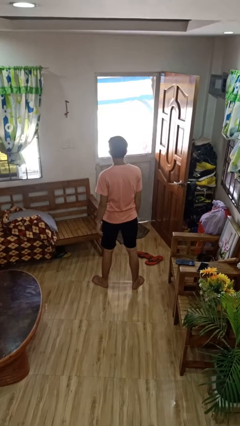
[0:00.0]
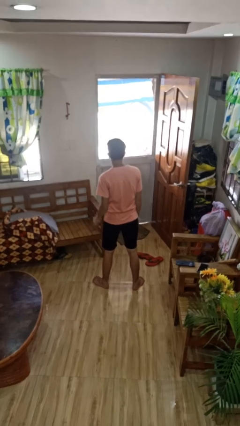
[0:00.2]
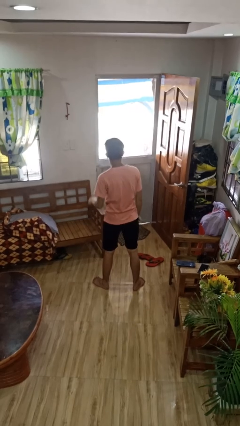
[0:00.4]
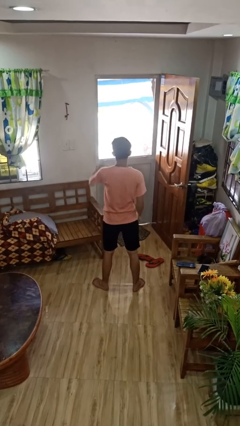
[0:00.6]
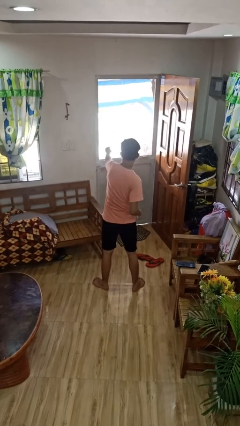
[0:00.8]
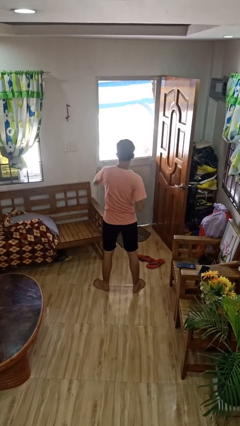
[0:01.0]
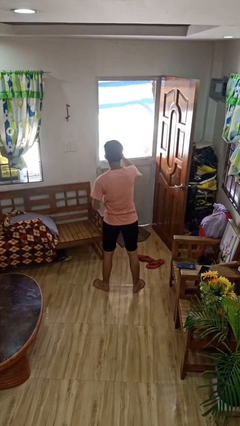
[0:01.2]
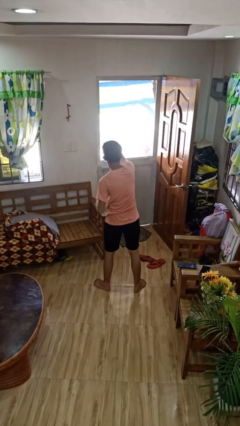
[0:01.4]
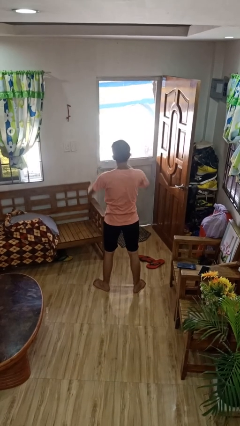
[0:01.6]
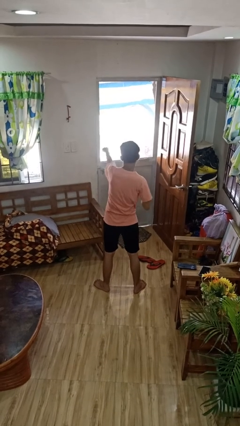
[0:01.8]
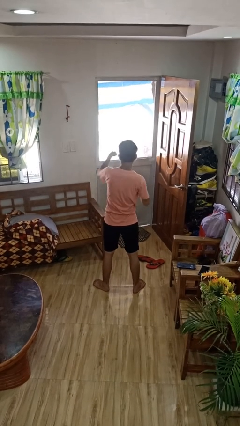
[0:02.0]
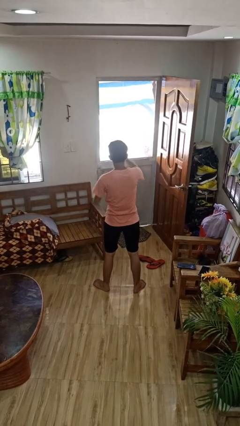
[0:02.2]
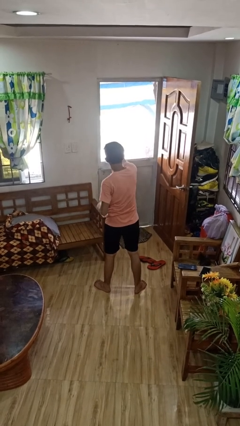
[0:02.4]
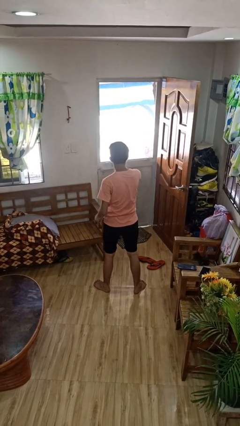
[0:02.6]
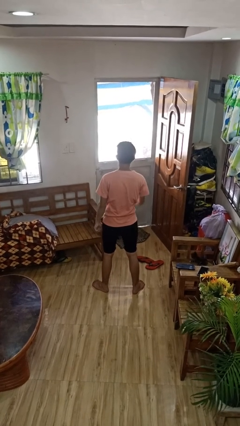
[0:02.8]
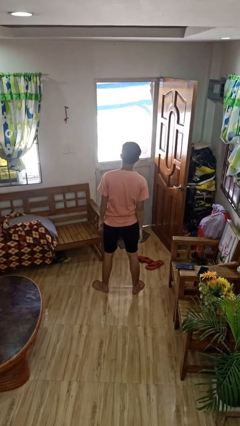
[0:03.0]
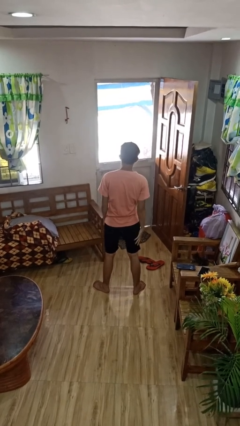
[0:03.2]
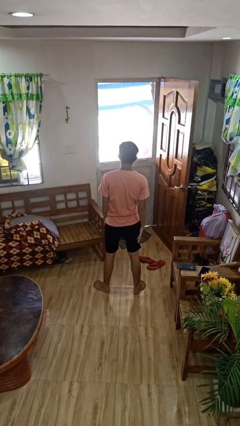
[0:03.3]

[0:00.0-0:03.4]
person punches

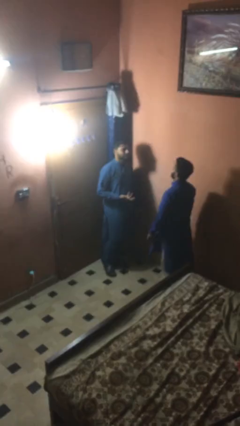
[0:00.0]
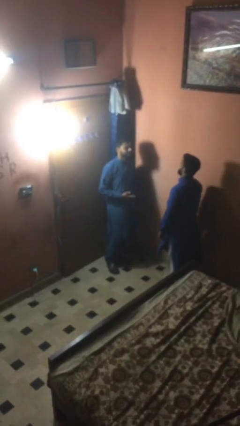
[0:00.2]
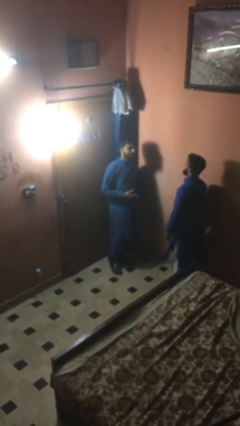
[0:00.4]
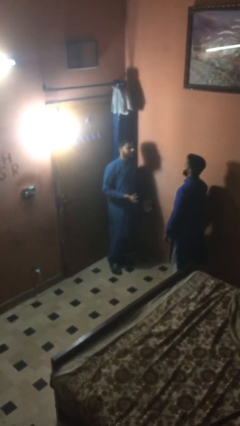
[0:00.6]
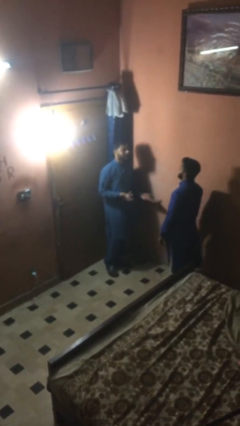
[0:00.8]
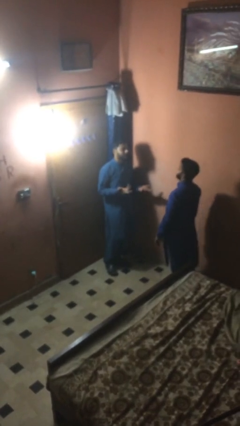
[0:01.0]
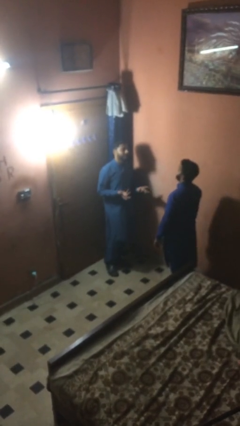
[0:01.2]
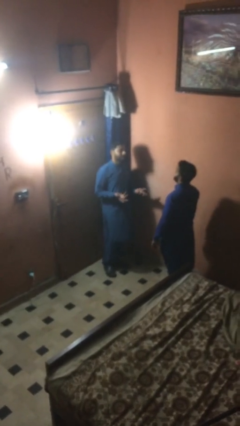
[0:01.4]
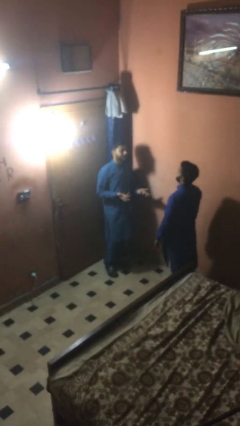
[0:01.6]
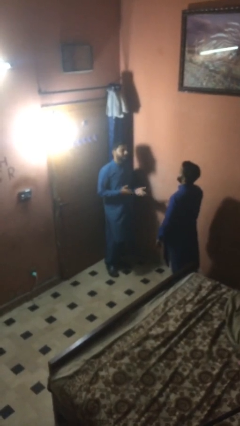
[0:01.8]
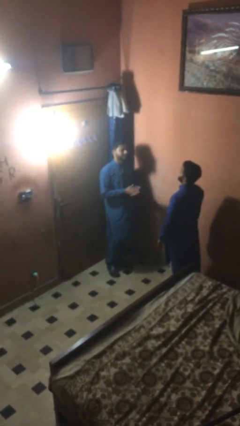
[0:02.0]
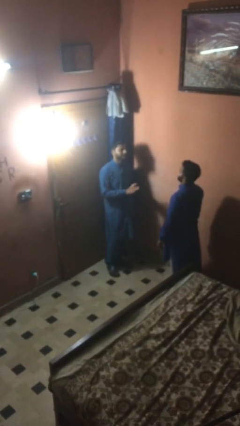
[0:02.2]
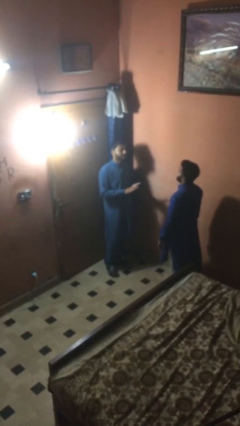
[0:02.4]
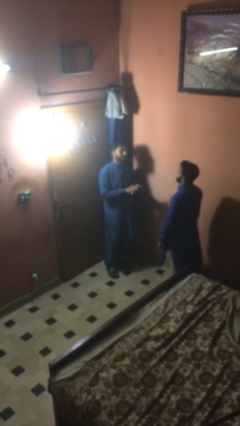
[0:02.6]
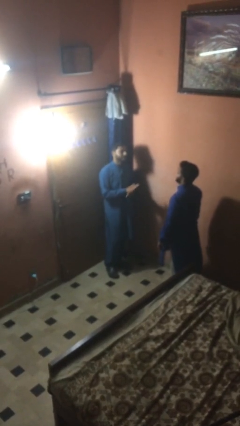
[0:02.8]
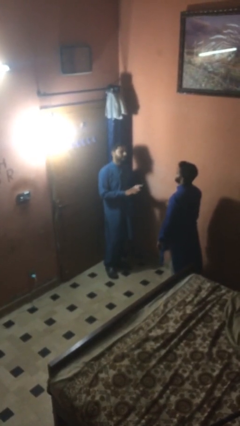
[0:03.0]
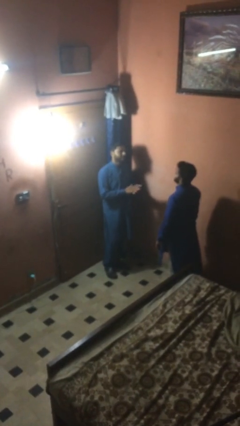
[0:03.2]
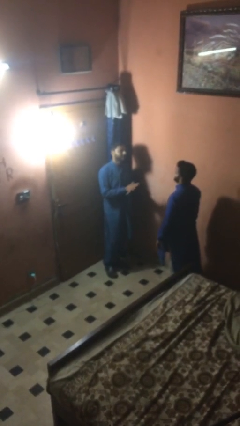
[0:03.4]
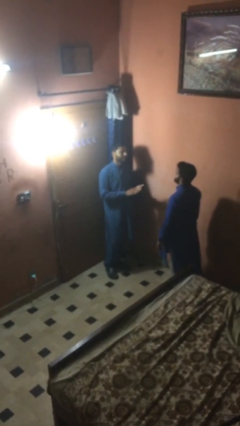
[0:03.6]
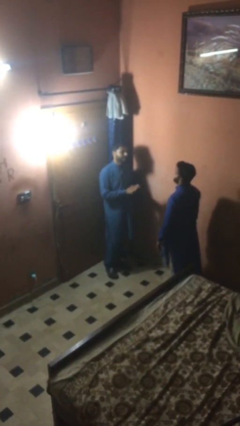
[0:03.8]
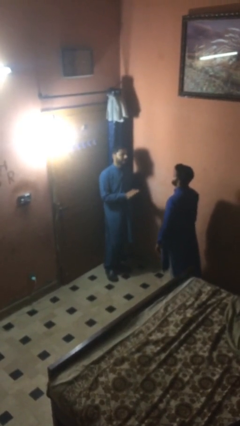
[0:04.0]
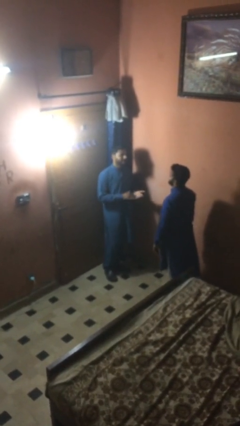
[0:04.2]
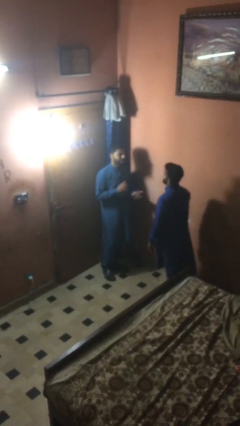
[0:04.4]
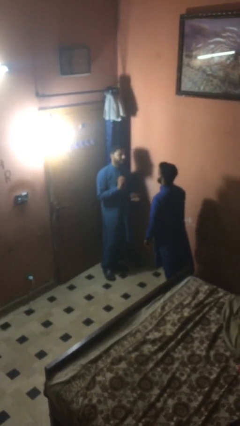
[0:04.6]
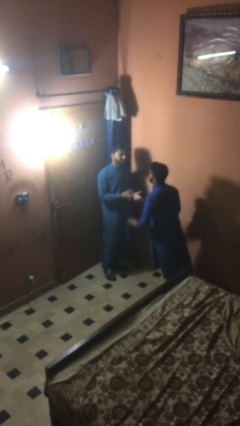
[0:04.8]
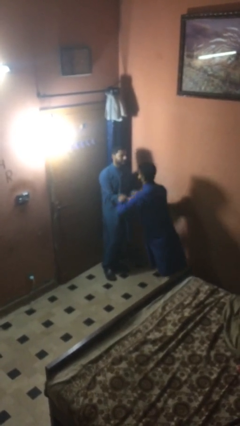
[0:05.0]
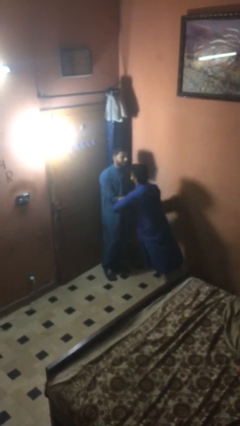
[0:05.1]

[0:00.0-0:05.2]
person talks to person

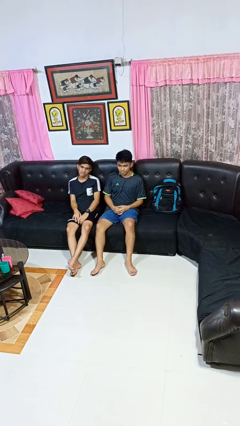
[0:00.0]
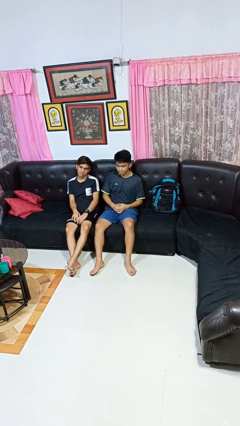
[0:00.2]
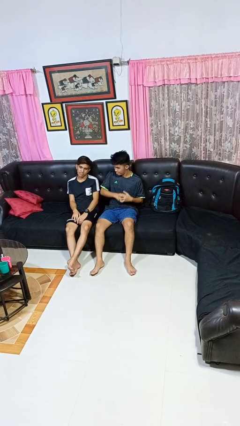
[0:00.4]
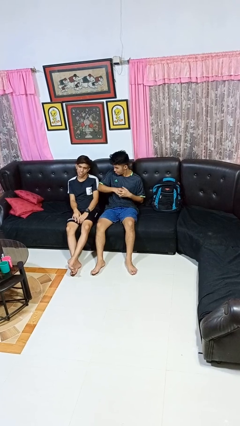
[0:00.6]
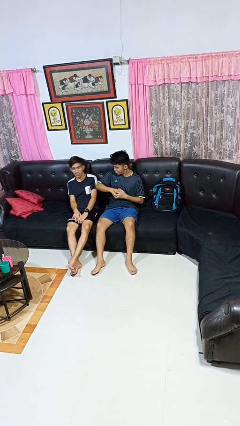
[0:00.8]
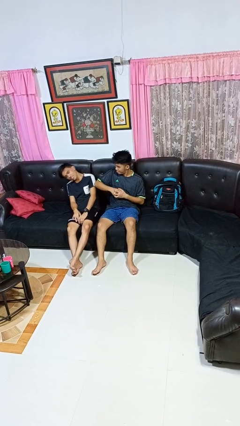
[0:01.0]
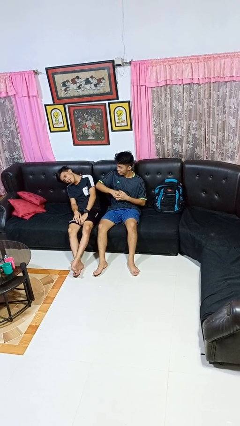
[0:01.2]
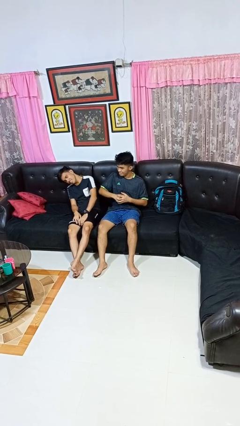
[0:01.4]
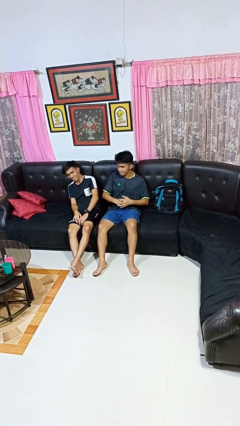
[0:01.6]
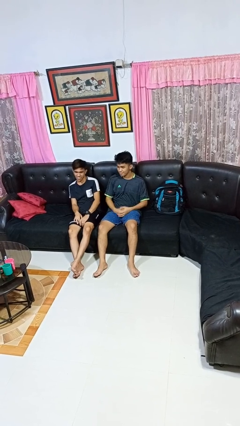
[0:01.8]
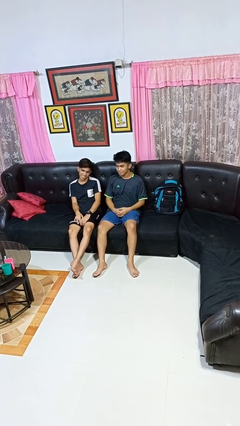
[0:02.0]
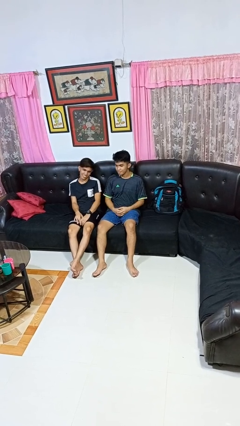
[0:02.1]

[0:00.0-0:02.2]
person nudges person with elbow

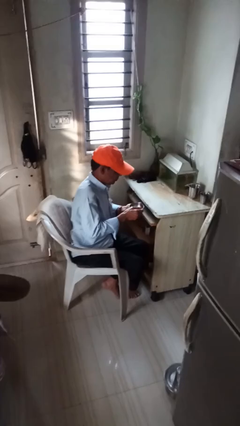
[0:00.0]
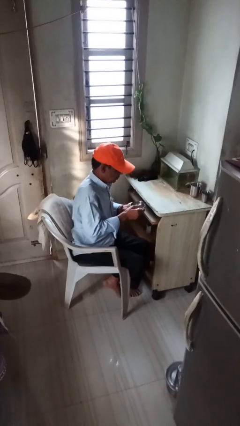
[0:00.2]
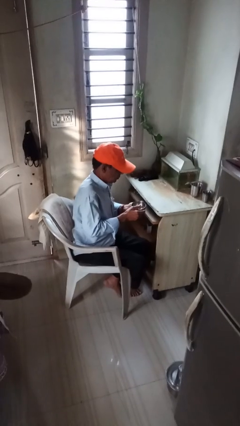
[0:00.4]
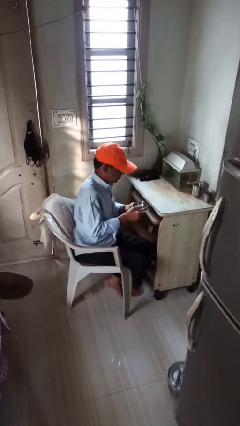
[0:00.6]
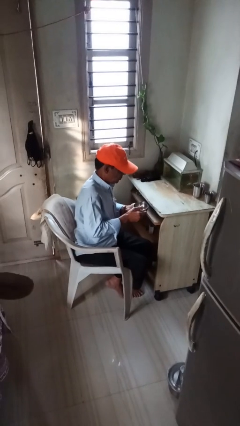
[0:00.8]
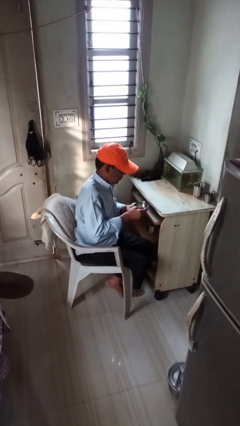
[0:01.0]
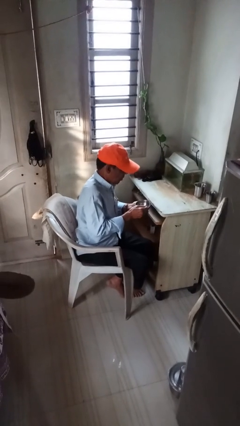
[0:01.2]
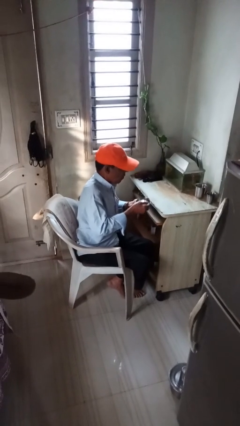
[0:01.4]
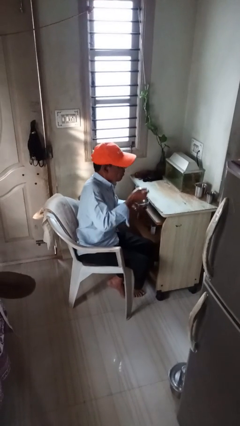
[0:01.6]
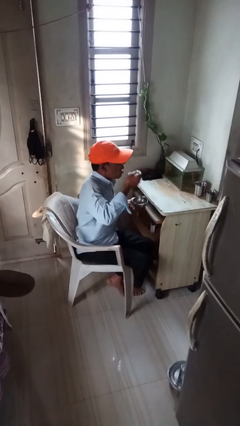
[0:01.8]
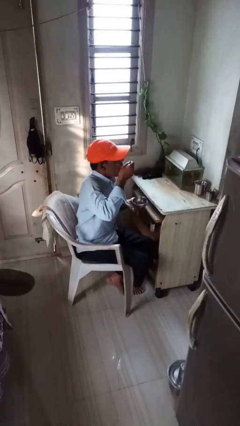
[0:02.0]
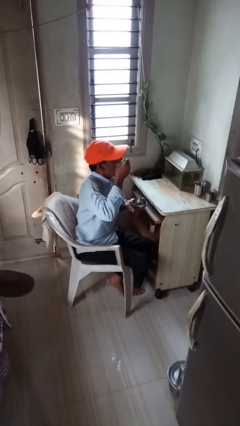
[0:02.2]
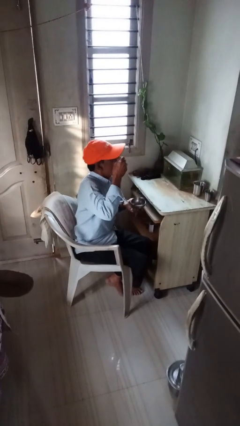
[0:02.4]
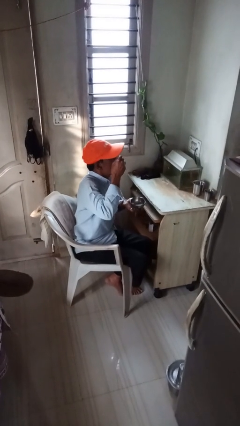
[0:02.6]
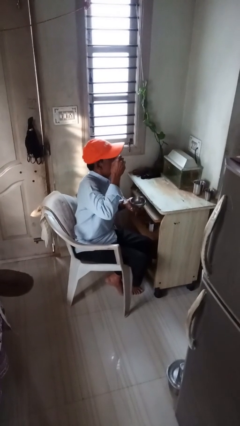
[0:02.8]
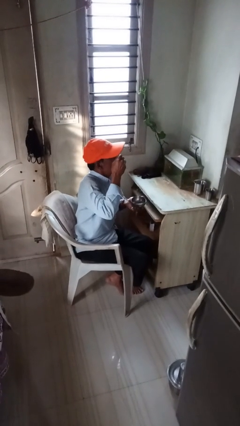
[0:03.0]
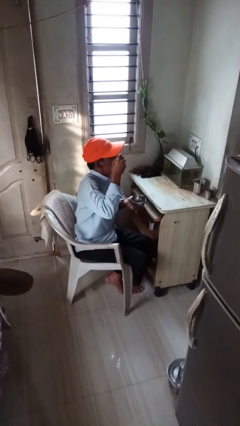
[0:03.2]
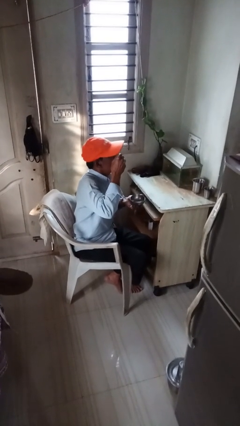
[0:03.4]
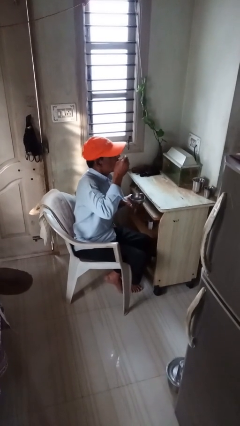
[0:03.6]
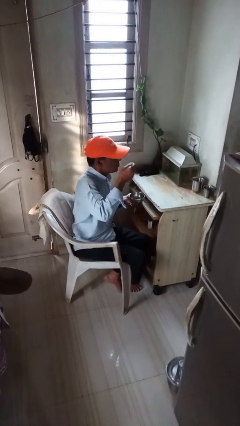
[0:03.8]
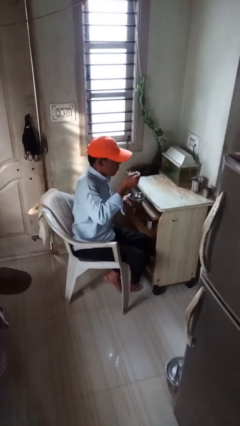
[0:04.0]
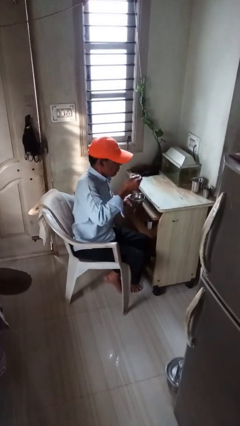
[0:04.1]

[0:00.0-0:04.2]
person eats with utensil

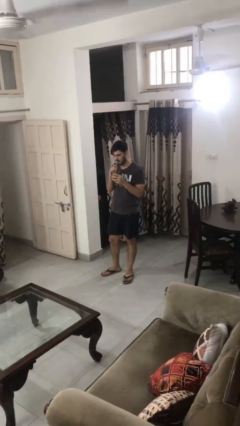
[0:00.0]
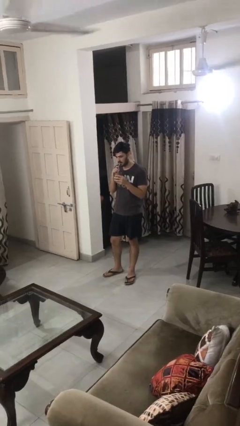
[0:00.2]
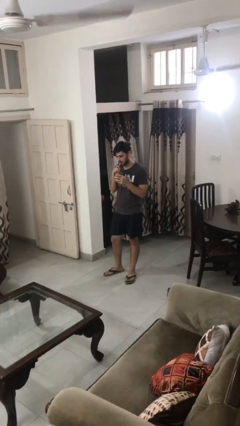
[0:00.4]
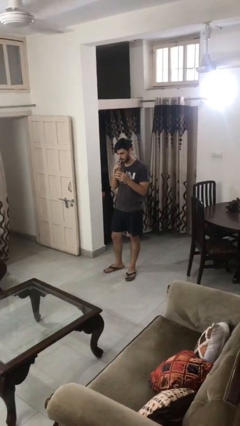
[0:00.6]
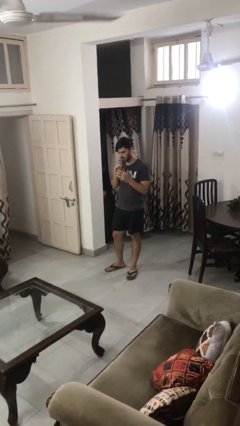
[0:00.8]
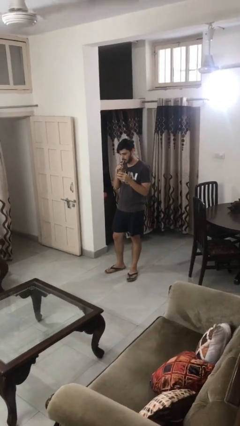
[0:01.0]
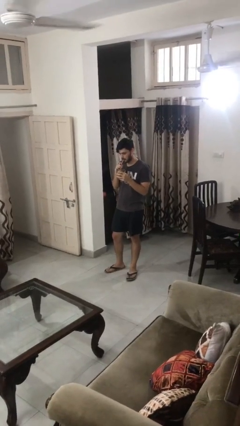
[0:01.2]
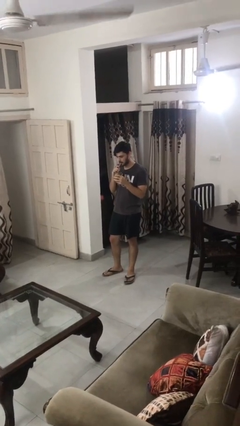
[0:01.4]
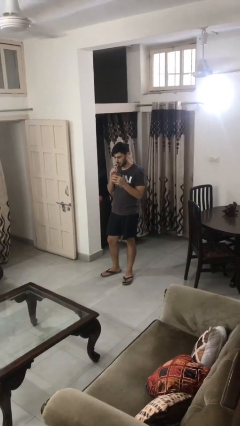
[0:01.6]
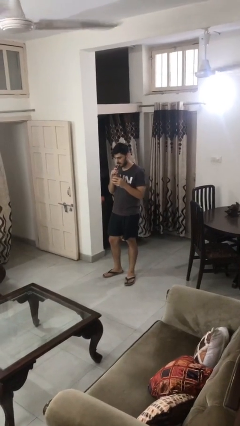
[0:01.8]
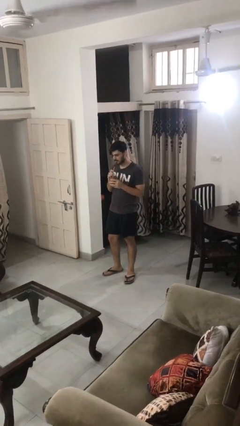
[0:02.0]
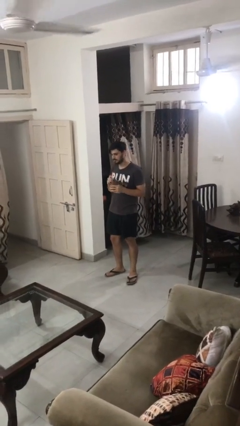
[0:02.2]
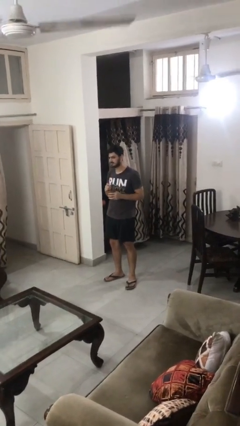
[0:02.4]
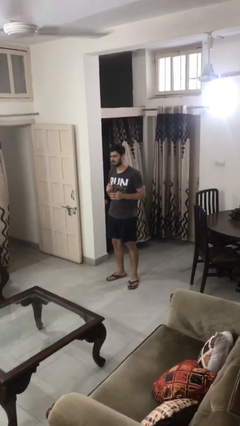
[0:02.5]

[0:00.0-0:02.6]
person drinks from straw

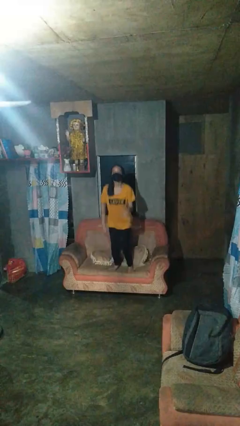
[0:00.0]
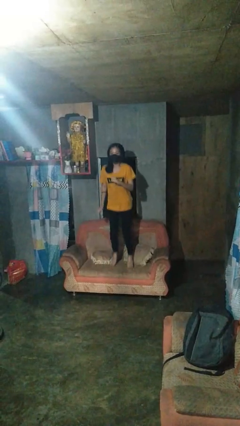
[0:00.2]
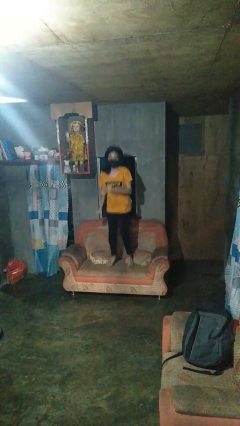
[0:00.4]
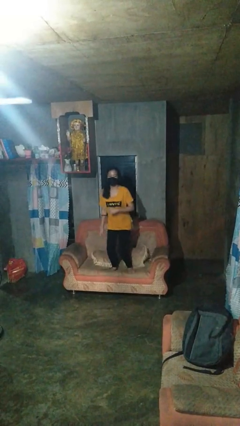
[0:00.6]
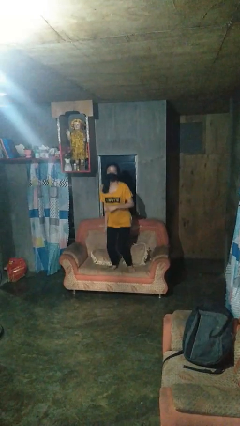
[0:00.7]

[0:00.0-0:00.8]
person jumps on couch
